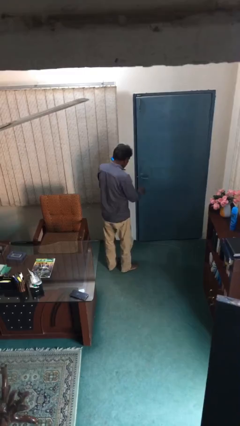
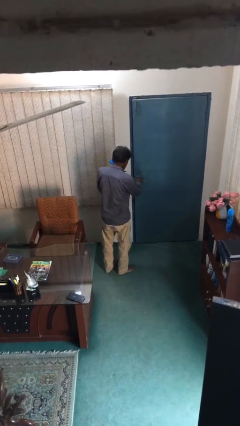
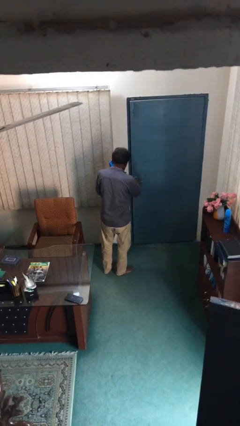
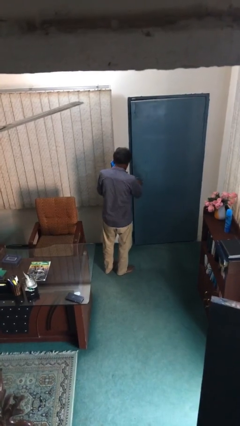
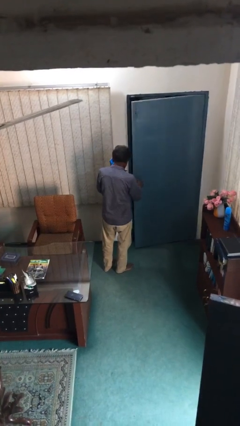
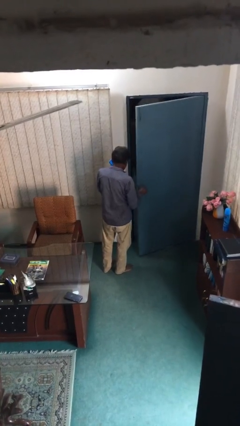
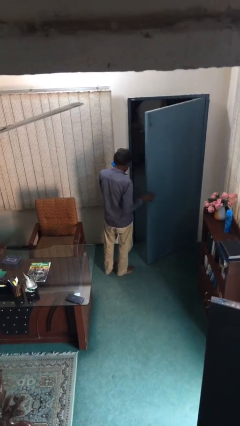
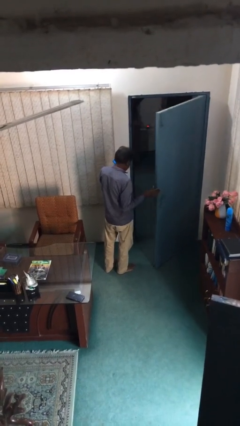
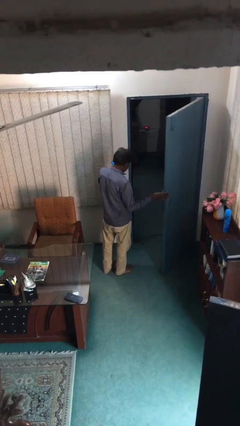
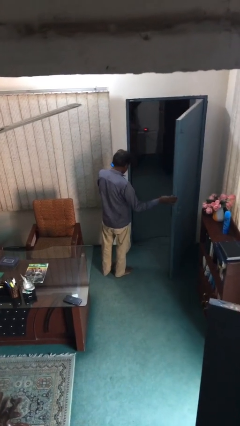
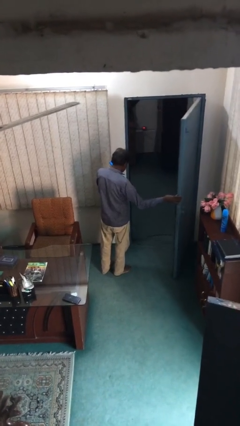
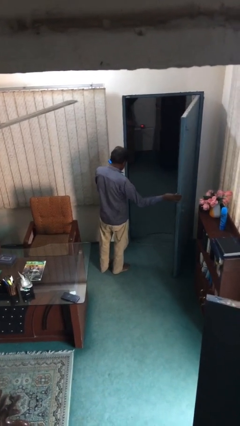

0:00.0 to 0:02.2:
person opens facility door

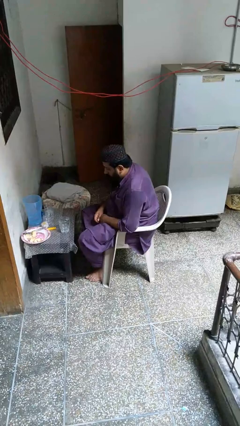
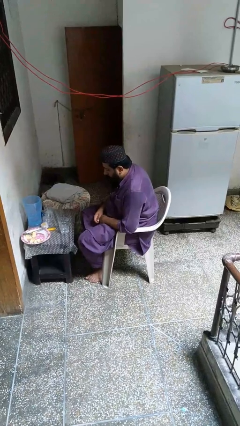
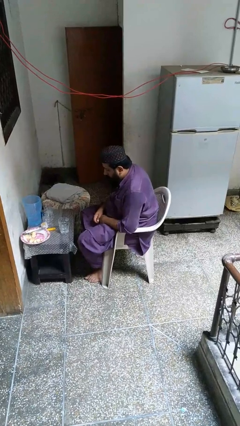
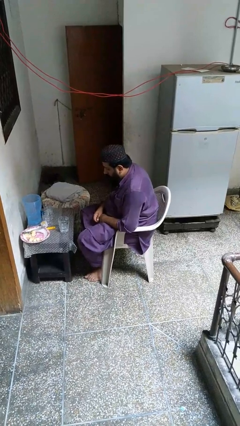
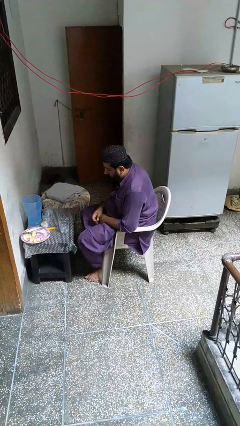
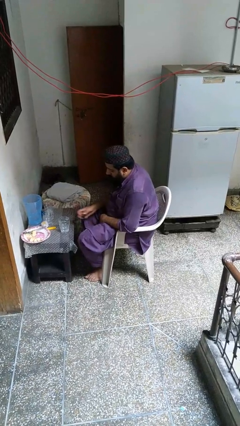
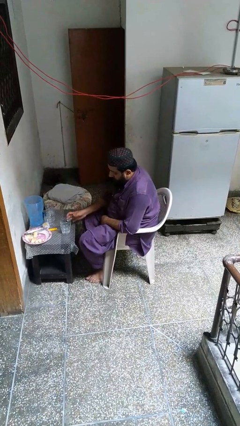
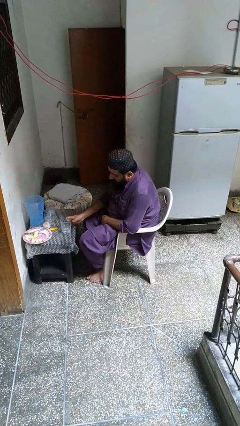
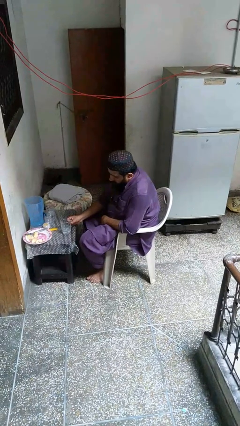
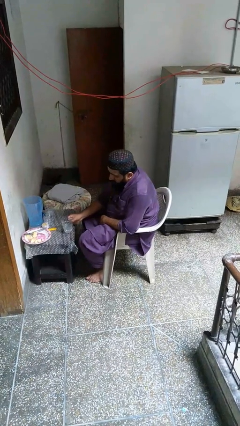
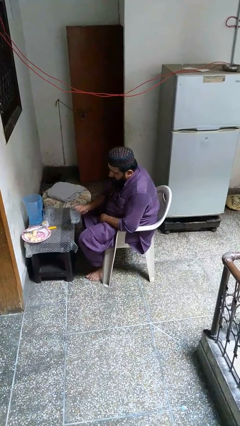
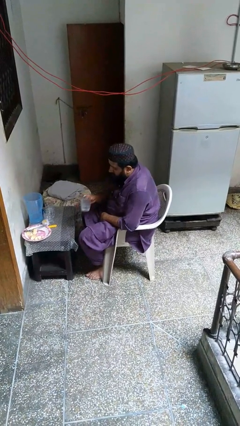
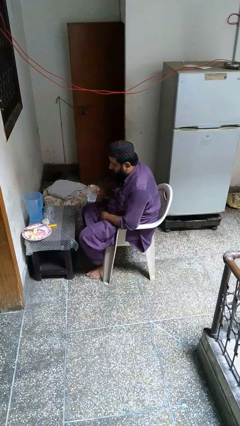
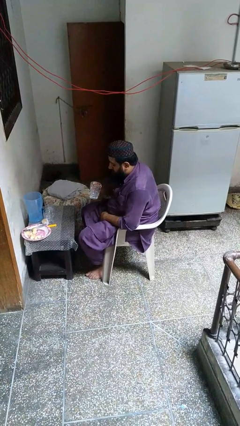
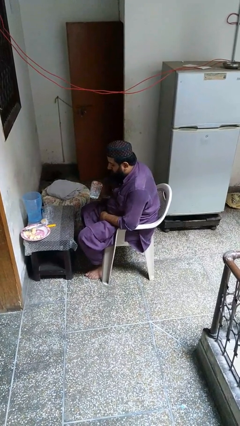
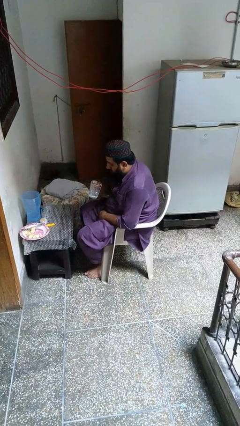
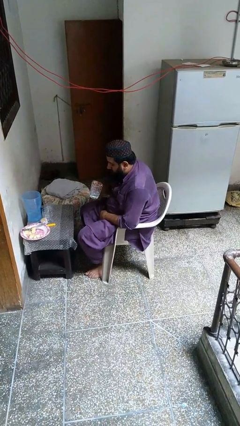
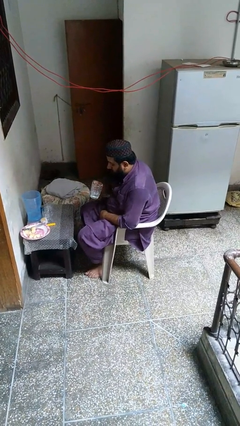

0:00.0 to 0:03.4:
person picks up object from table

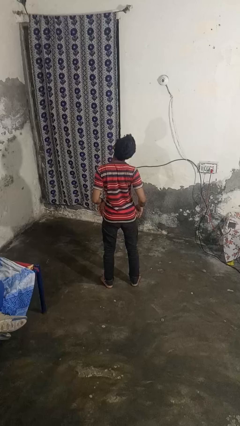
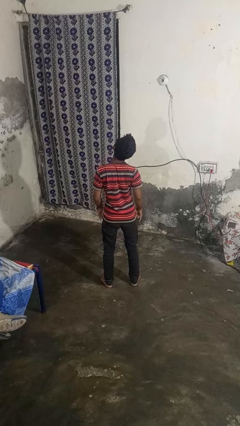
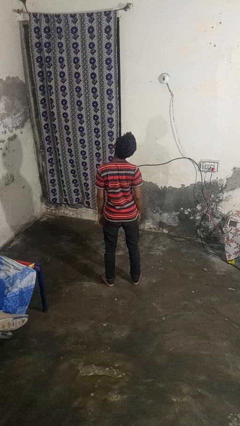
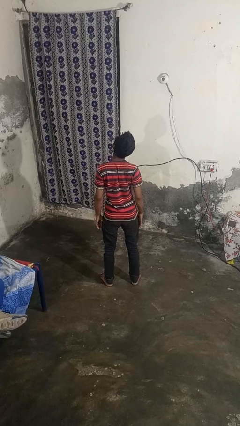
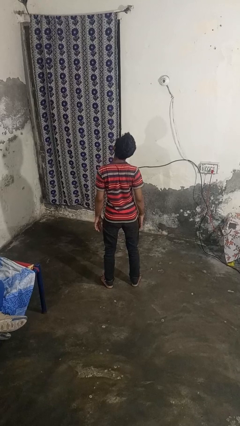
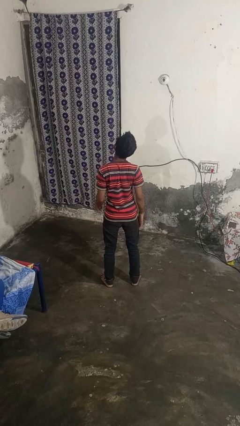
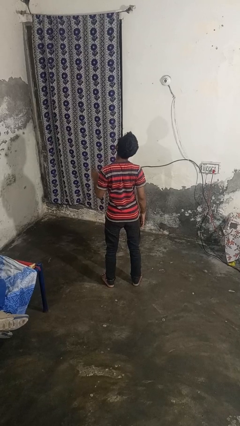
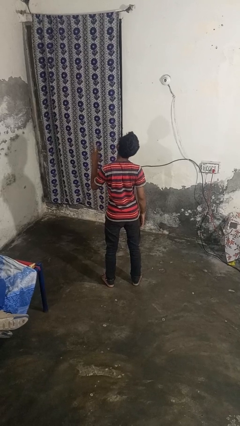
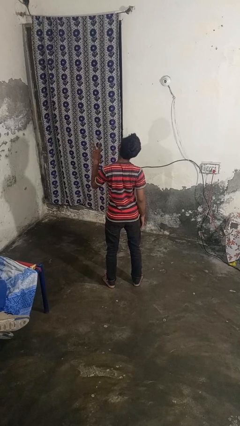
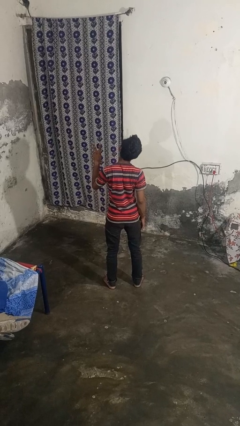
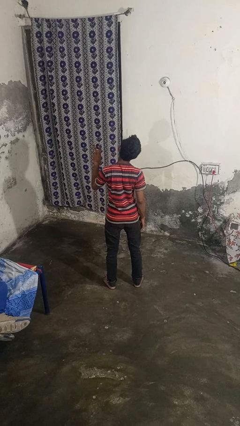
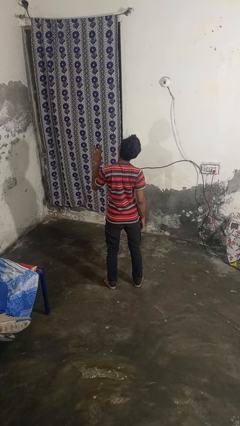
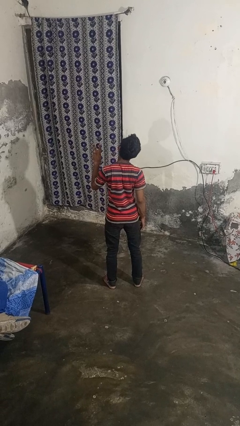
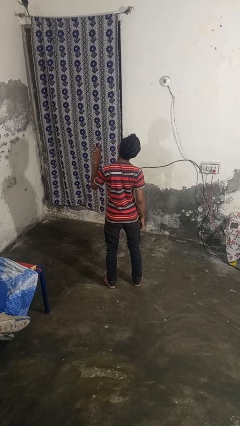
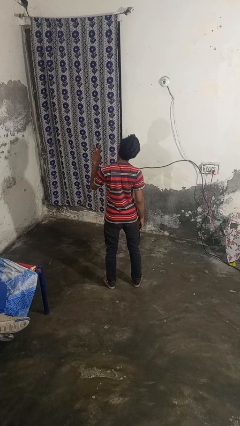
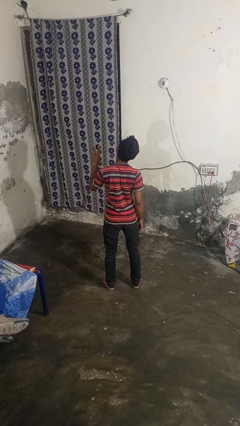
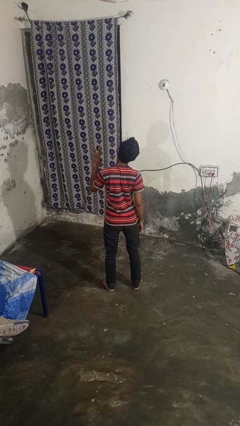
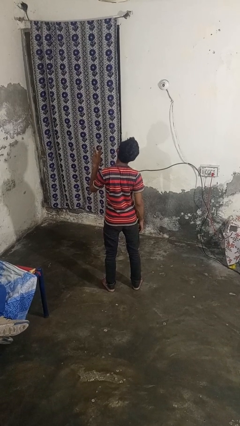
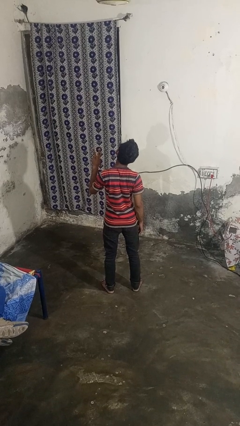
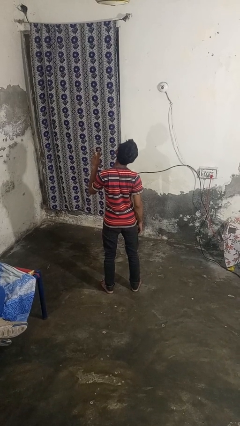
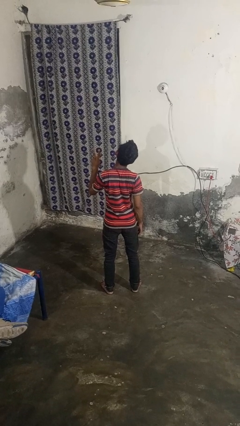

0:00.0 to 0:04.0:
person gestures peace

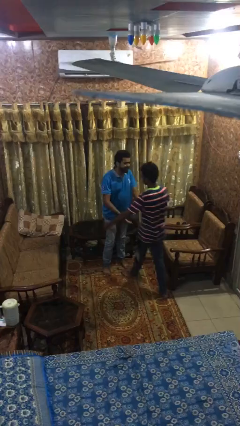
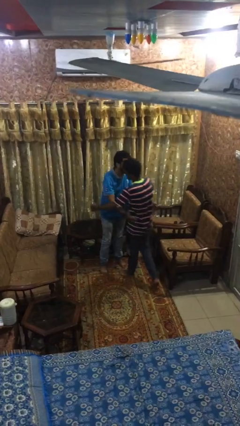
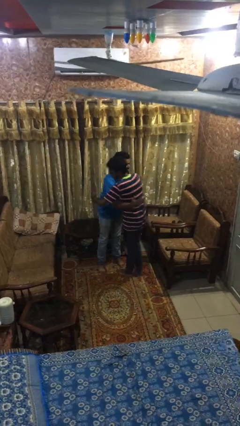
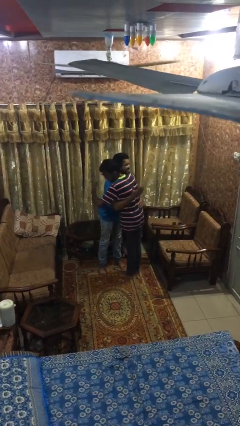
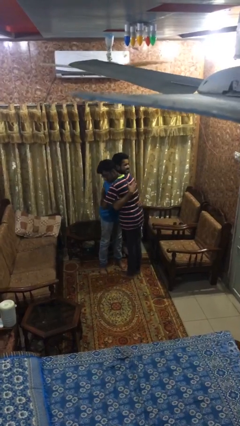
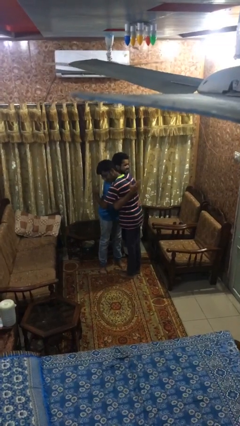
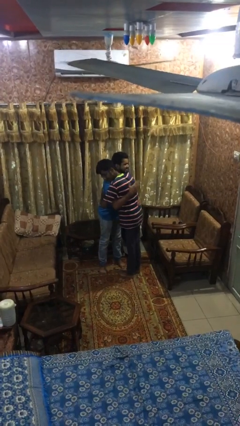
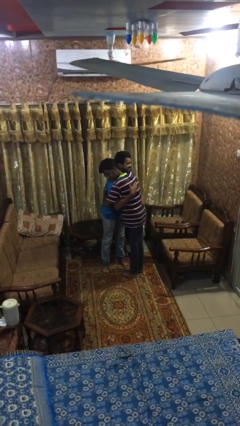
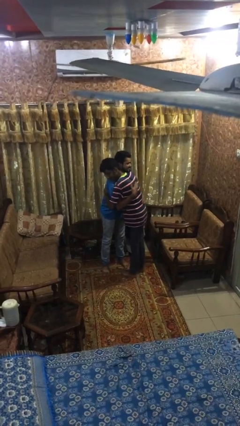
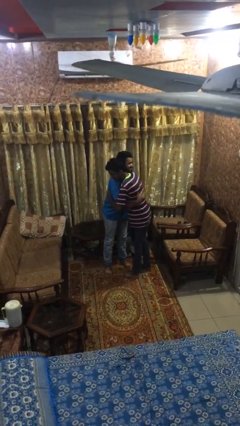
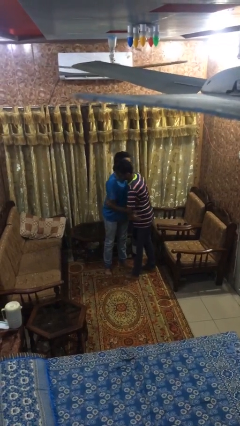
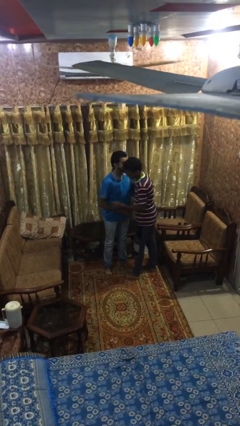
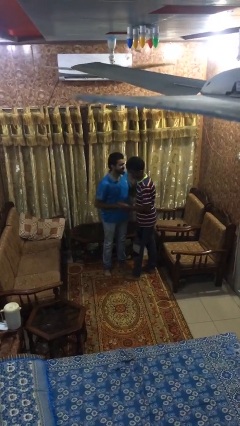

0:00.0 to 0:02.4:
person embraces person

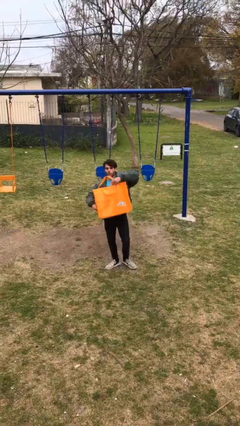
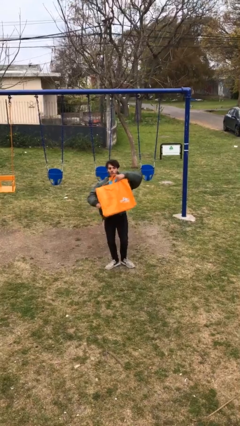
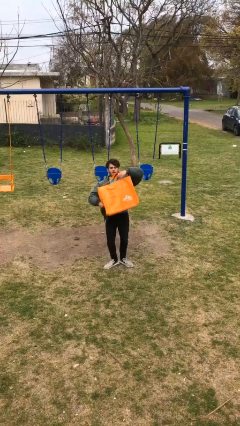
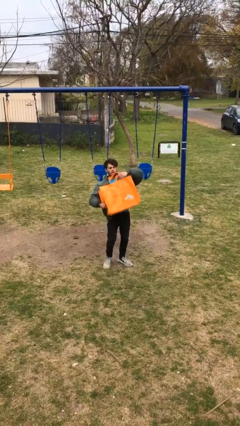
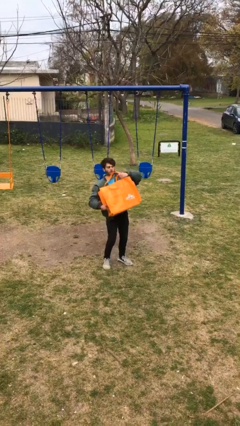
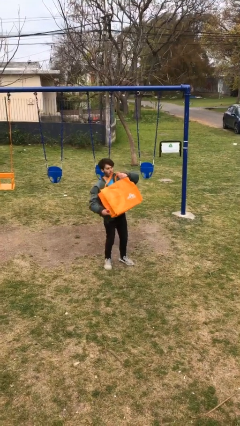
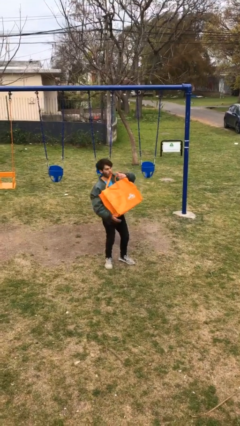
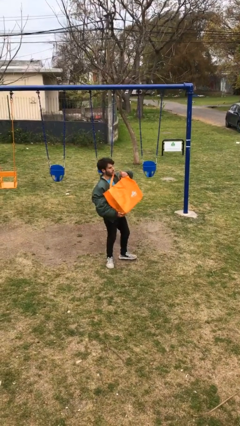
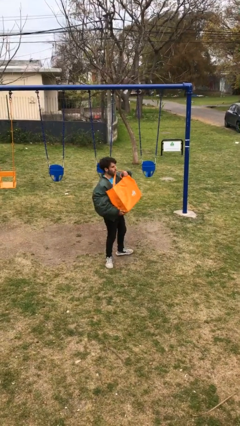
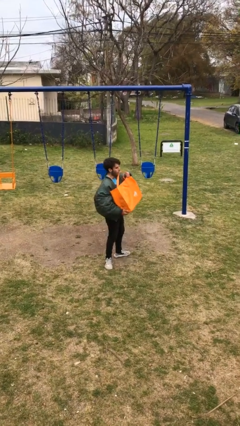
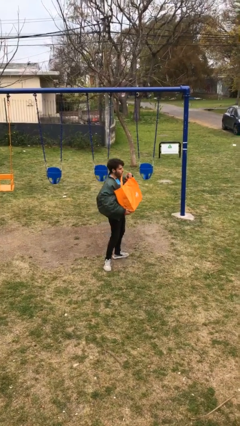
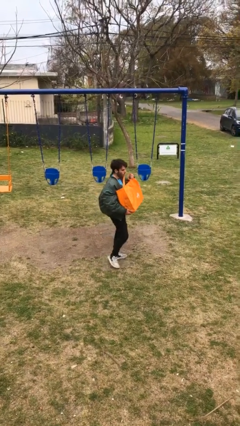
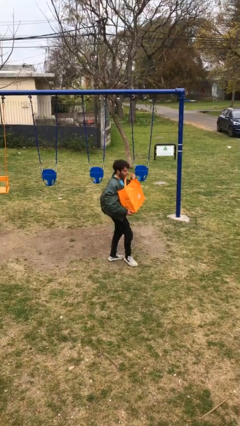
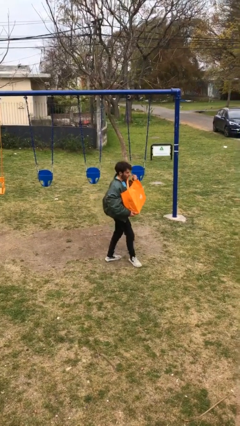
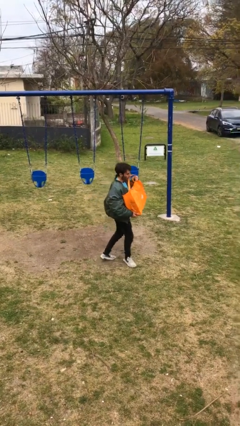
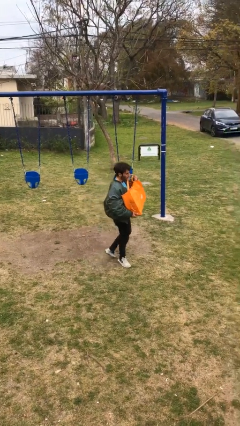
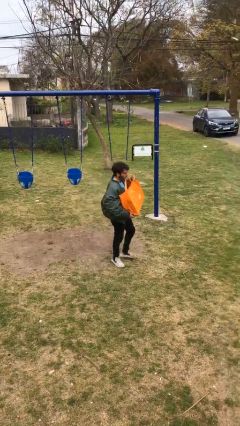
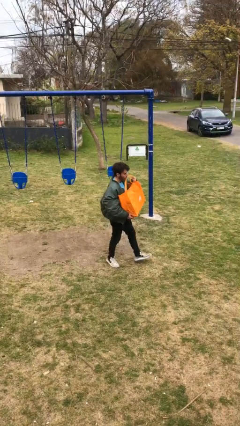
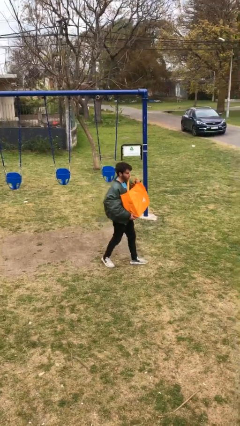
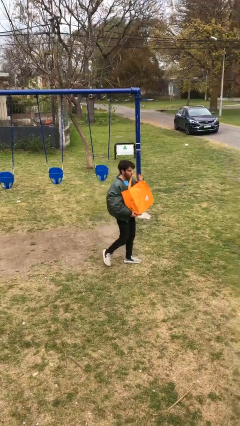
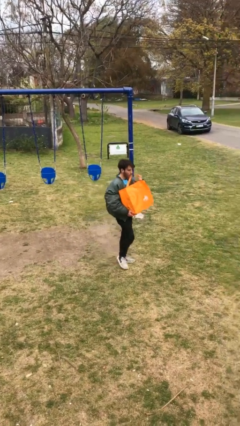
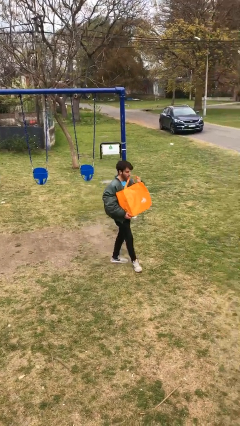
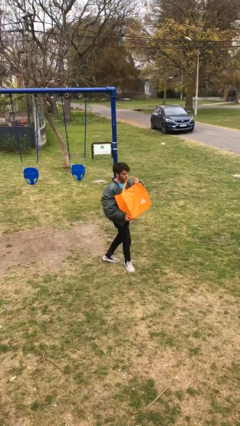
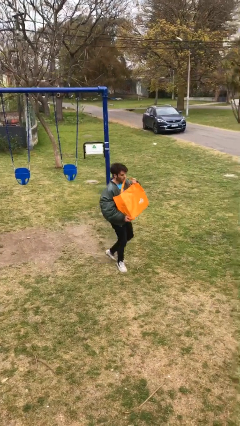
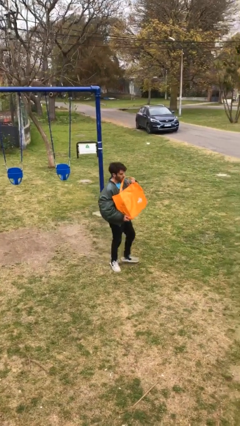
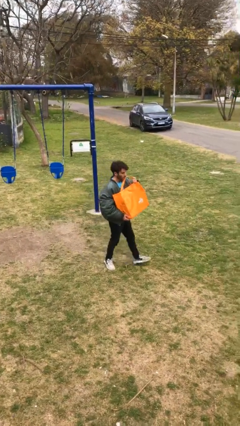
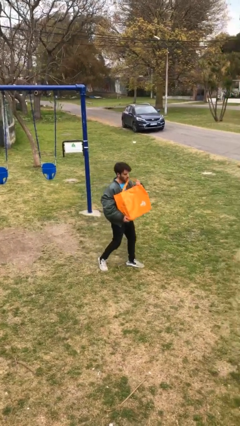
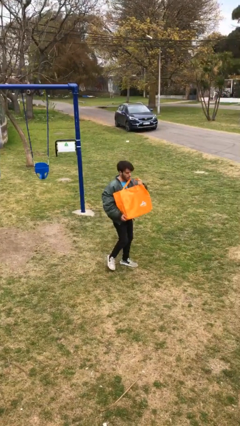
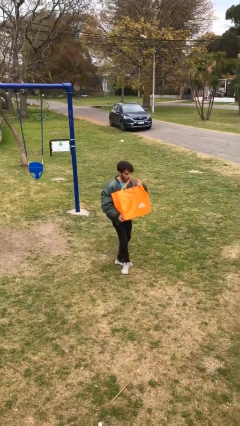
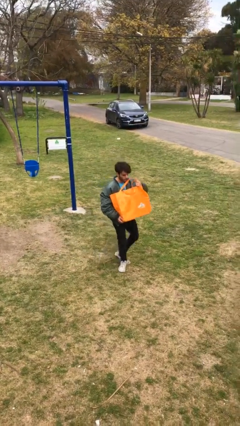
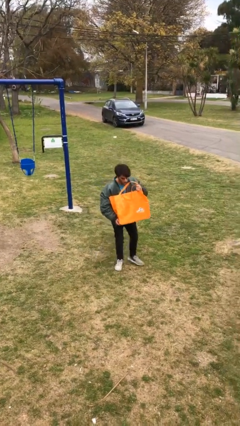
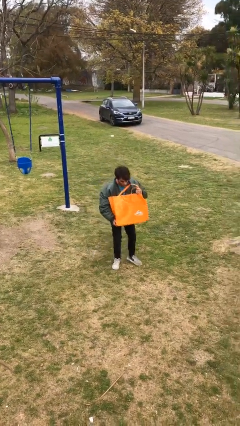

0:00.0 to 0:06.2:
person carries heavy object
